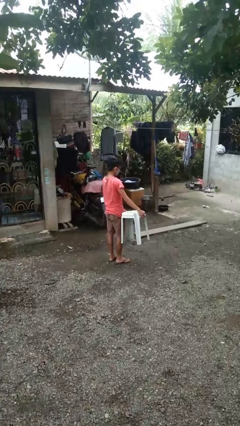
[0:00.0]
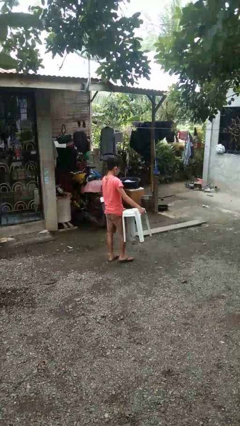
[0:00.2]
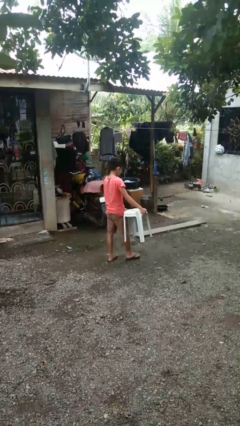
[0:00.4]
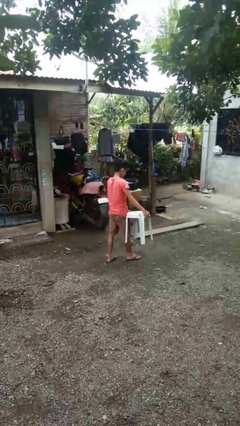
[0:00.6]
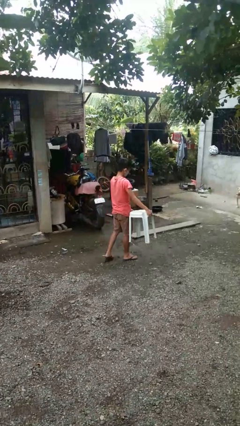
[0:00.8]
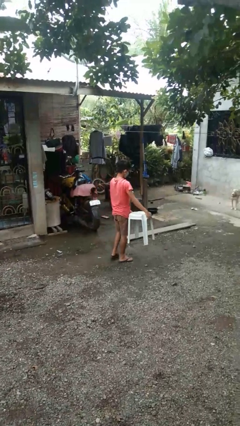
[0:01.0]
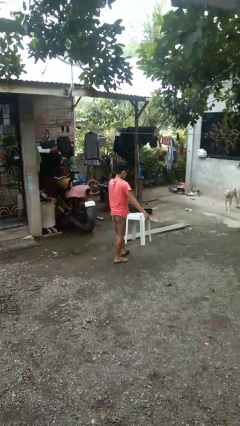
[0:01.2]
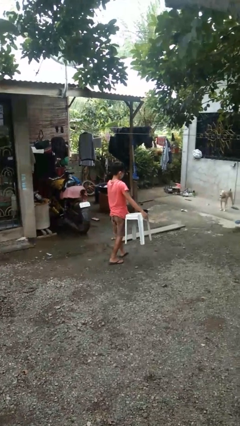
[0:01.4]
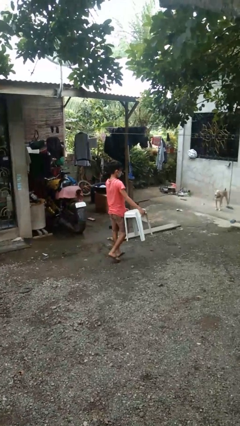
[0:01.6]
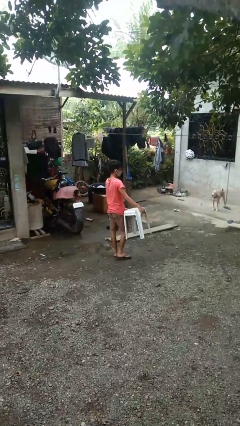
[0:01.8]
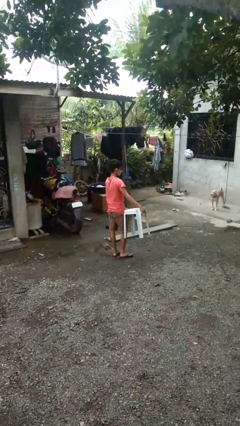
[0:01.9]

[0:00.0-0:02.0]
person carries furniture

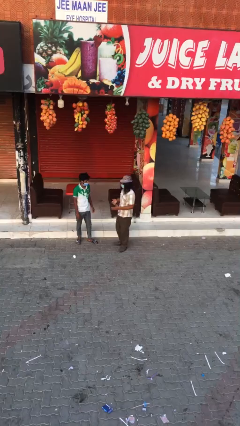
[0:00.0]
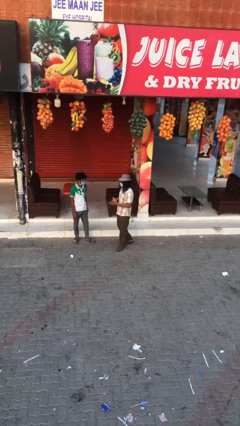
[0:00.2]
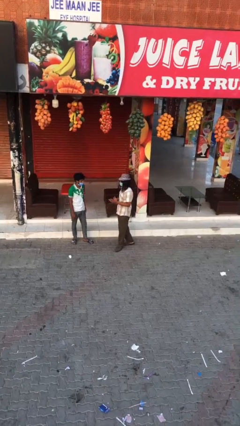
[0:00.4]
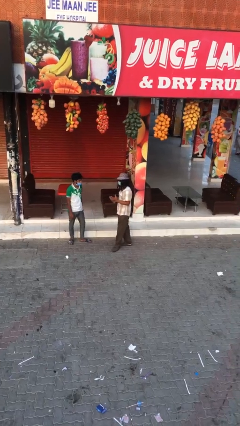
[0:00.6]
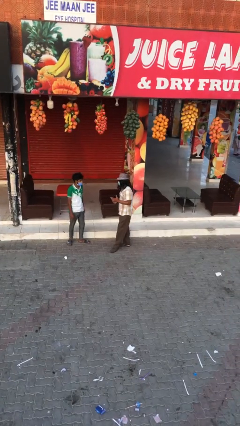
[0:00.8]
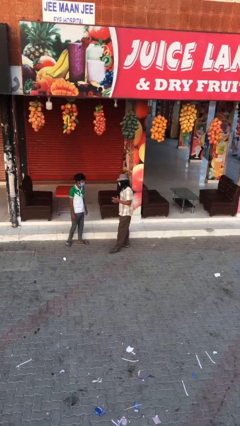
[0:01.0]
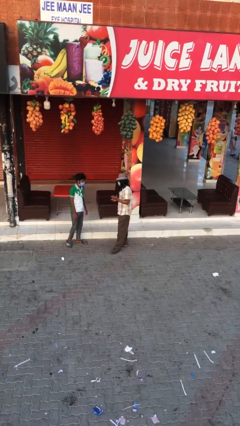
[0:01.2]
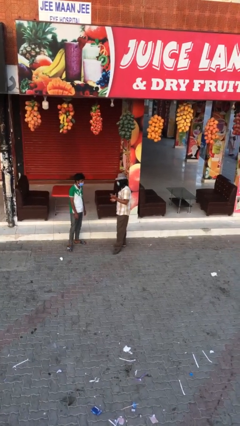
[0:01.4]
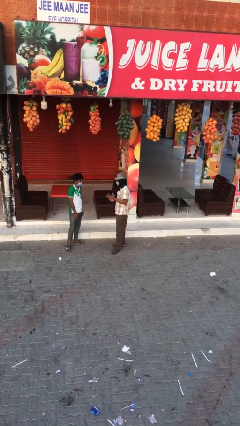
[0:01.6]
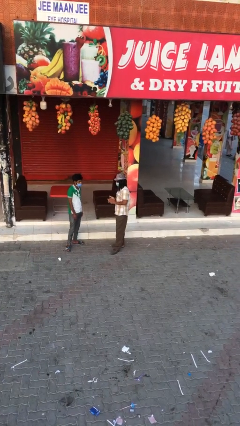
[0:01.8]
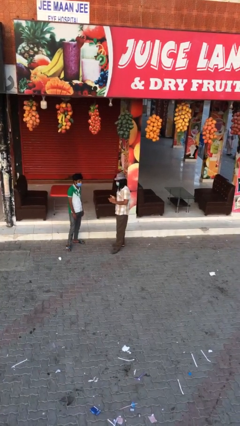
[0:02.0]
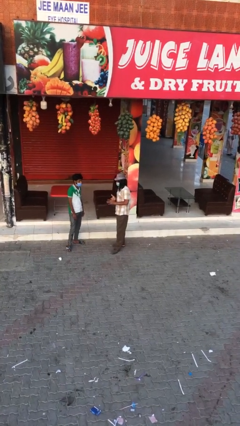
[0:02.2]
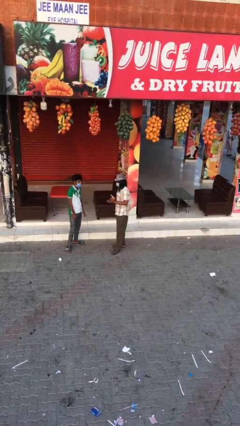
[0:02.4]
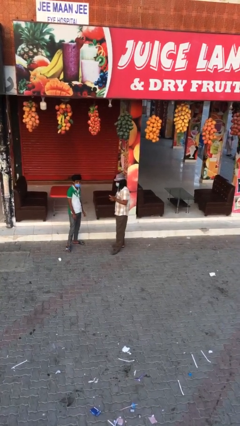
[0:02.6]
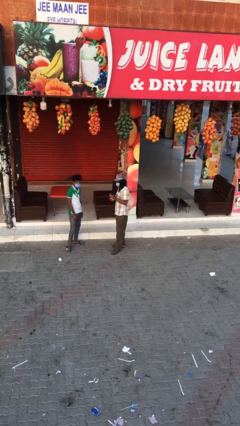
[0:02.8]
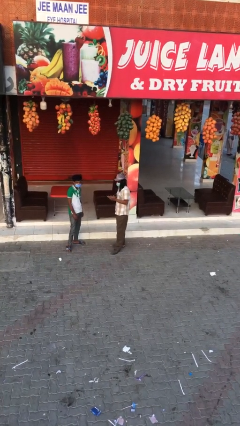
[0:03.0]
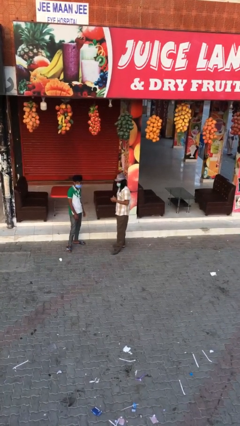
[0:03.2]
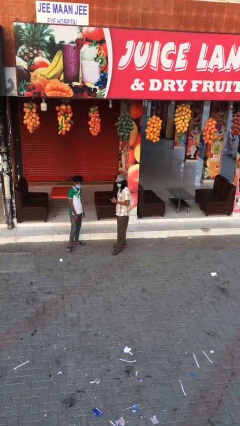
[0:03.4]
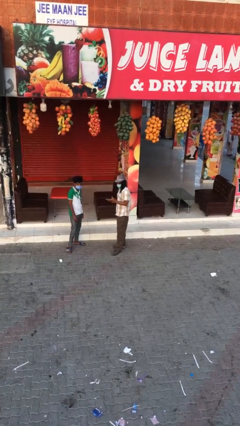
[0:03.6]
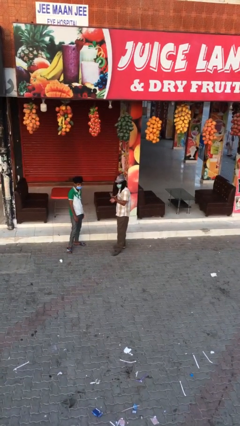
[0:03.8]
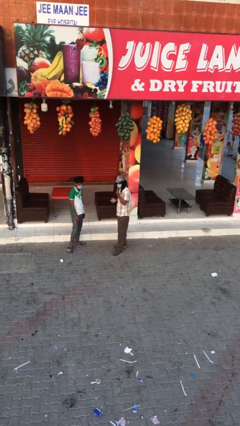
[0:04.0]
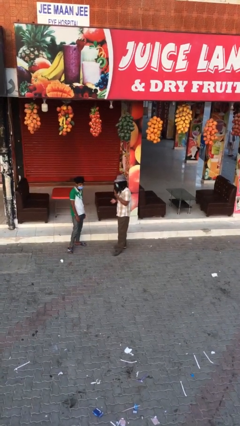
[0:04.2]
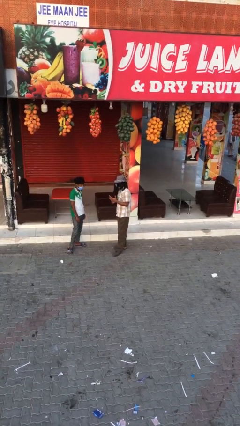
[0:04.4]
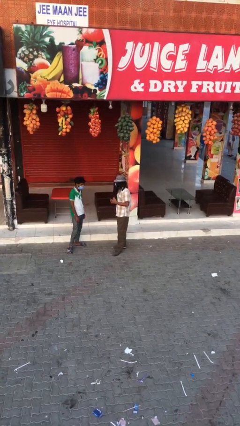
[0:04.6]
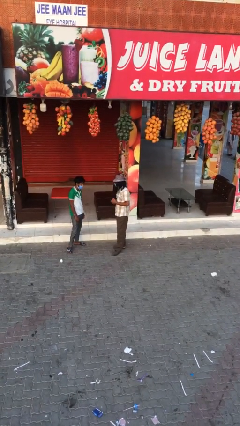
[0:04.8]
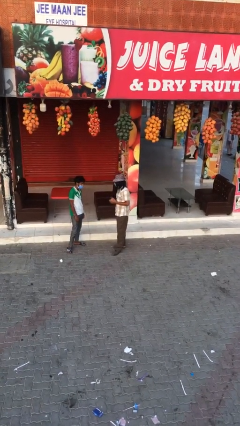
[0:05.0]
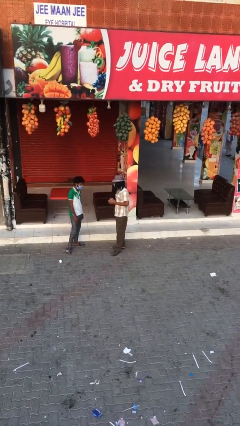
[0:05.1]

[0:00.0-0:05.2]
person talks to person

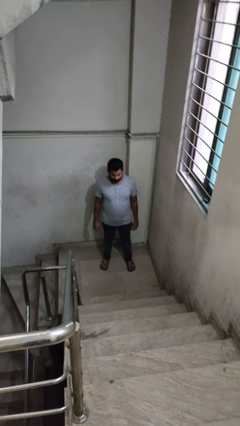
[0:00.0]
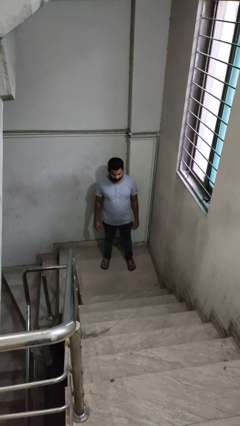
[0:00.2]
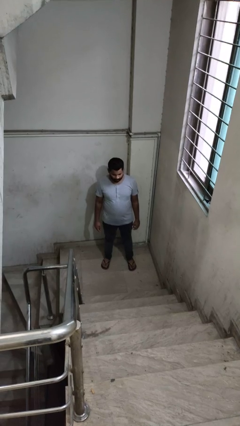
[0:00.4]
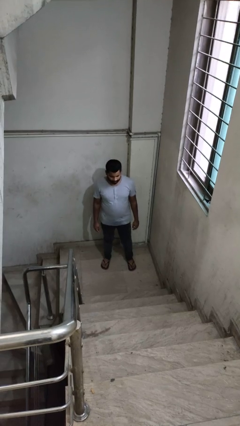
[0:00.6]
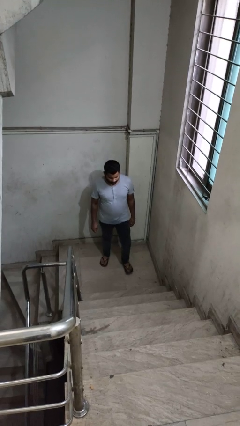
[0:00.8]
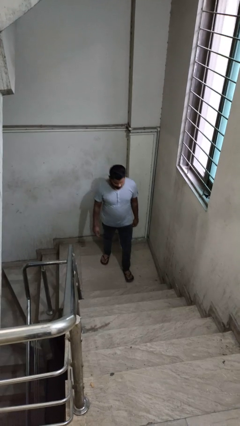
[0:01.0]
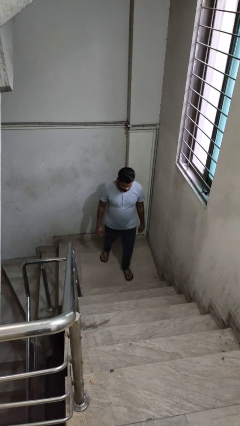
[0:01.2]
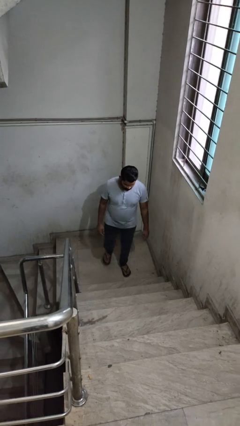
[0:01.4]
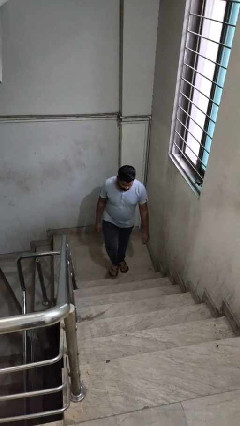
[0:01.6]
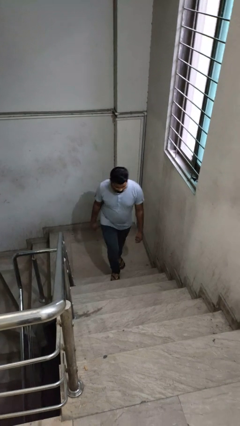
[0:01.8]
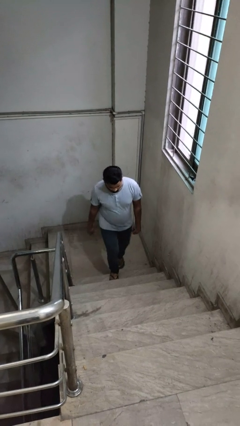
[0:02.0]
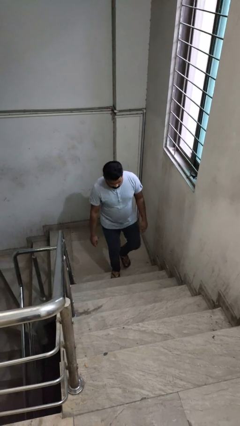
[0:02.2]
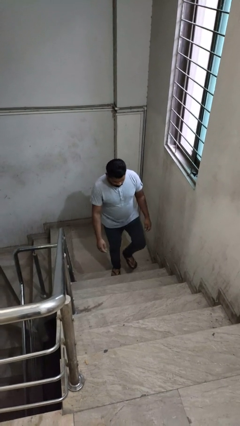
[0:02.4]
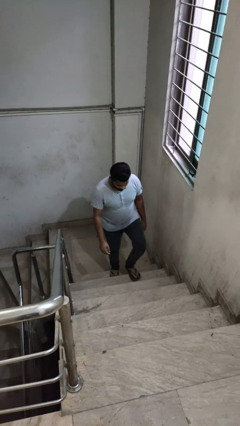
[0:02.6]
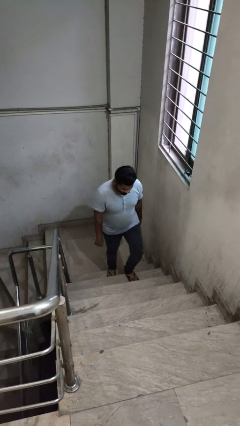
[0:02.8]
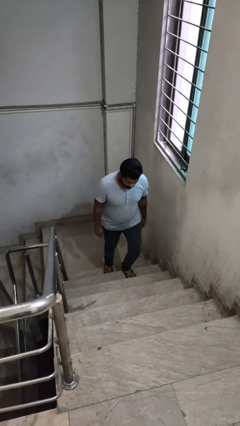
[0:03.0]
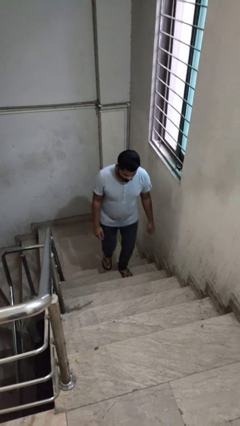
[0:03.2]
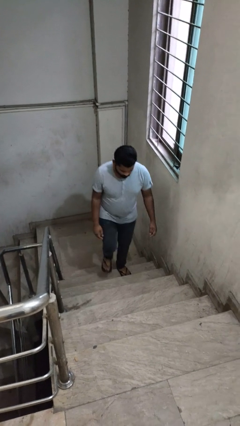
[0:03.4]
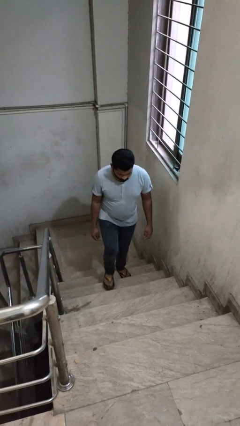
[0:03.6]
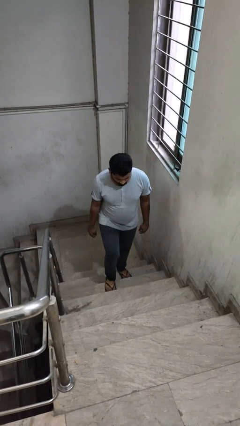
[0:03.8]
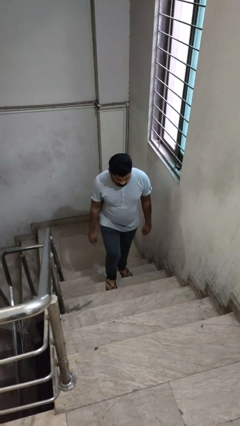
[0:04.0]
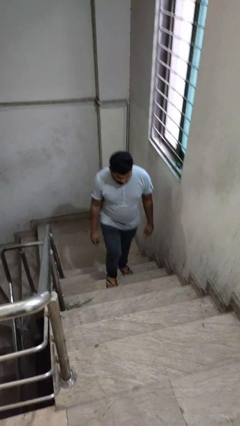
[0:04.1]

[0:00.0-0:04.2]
person climbs up stairs

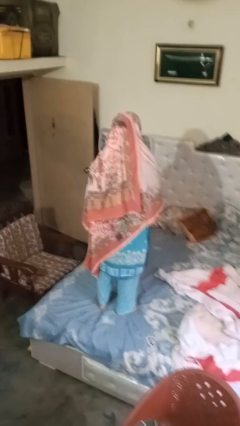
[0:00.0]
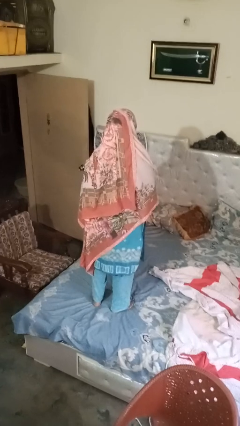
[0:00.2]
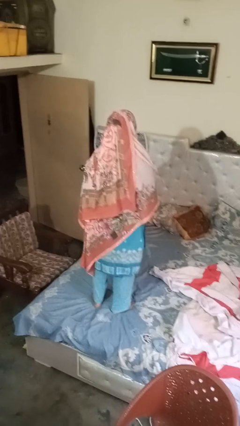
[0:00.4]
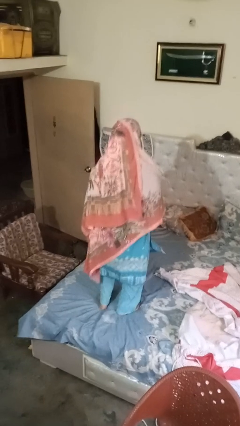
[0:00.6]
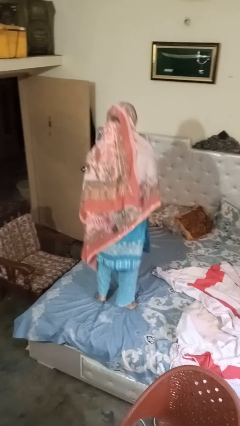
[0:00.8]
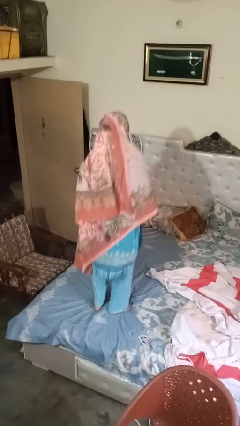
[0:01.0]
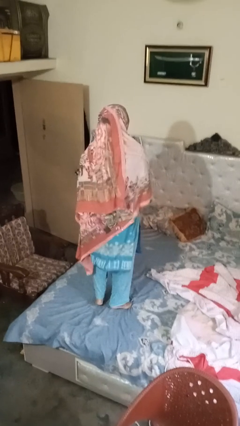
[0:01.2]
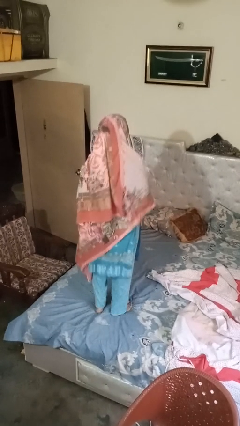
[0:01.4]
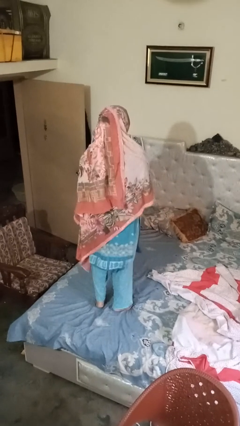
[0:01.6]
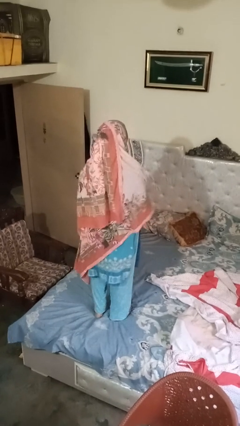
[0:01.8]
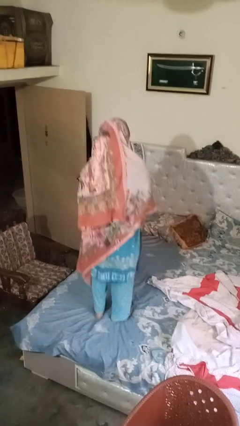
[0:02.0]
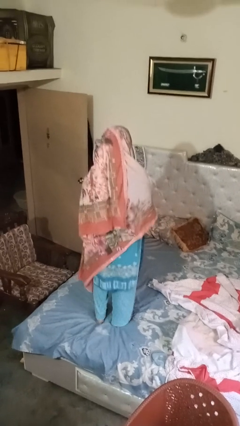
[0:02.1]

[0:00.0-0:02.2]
person jumps on bed

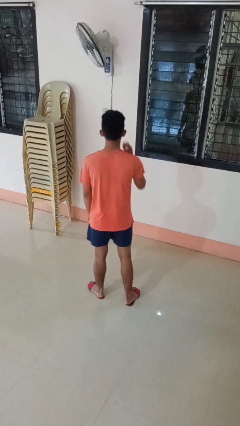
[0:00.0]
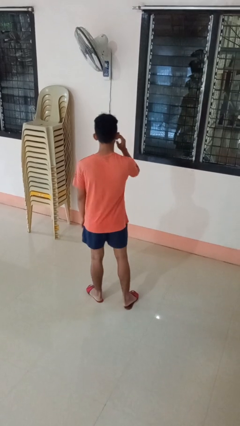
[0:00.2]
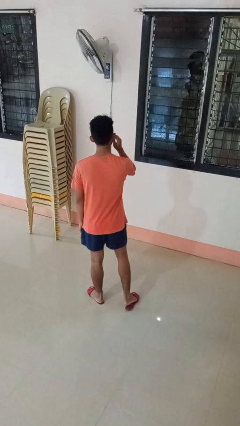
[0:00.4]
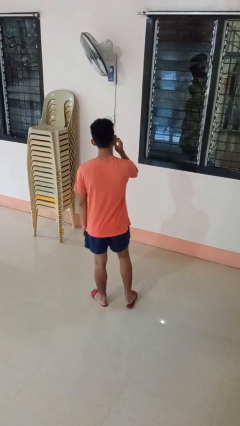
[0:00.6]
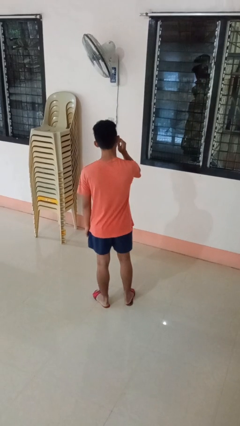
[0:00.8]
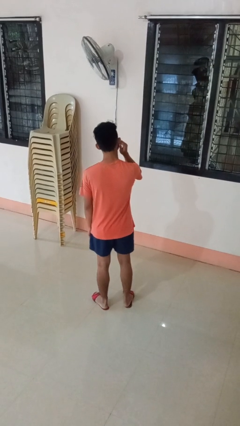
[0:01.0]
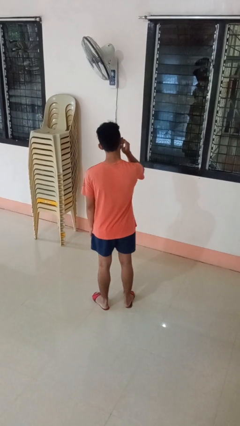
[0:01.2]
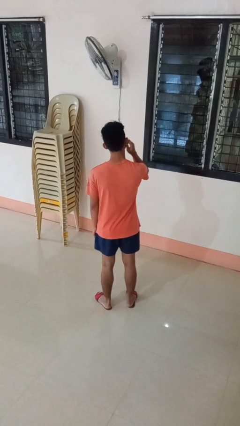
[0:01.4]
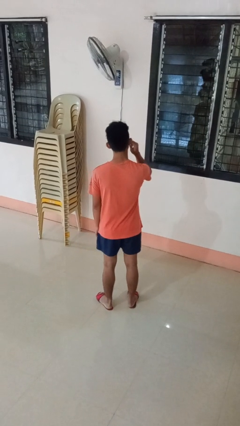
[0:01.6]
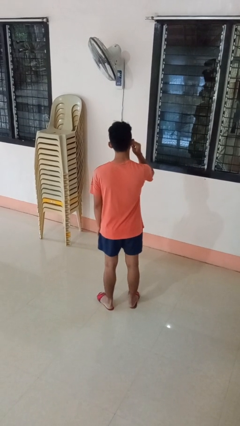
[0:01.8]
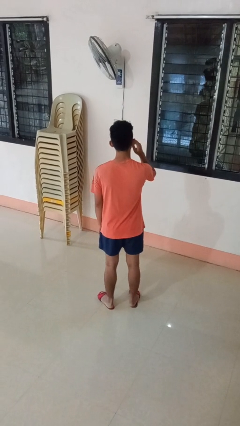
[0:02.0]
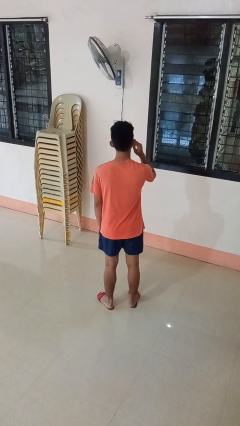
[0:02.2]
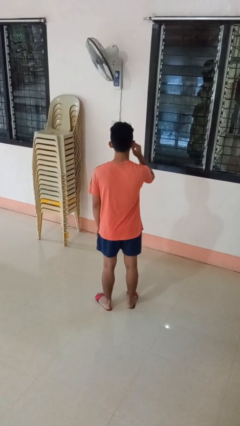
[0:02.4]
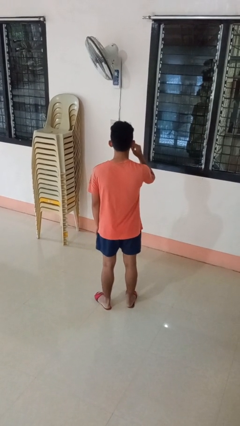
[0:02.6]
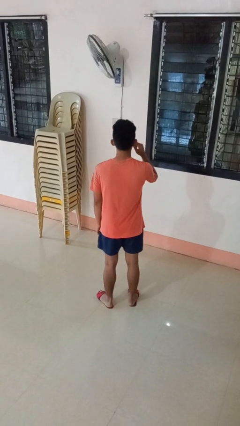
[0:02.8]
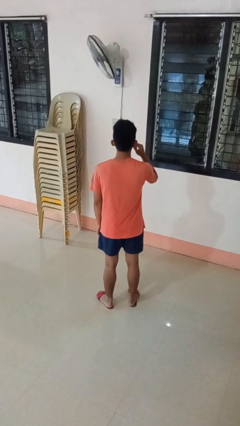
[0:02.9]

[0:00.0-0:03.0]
person touches earlobe

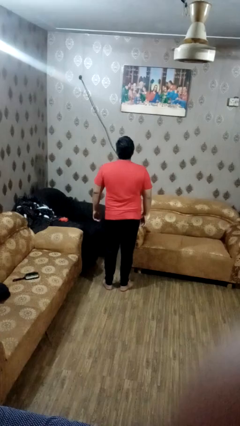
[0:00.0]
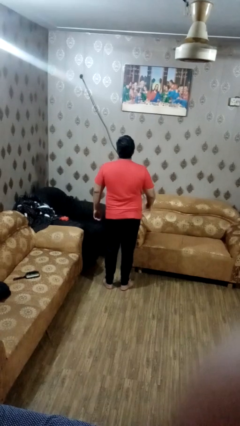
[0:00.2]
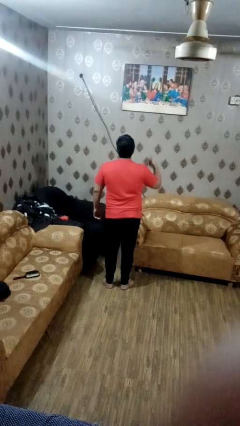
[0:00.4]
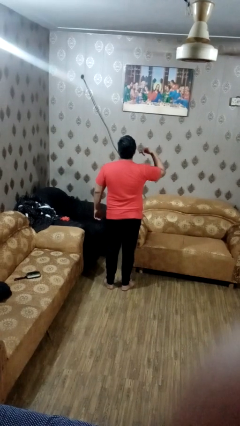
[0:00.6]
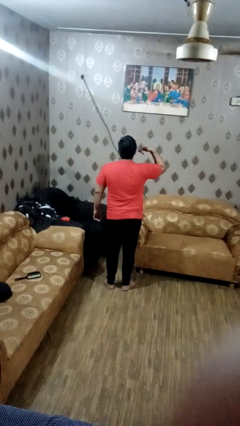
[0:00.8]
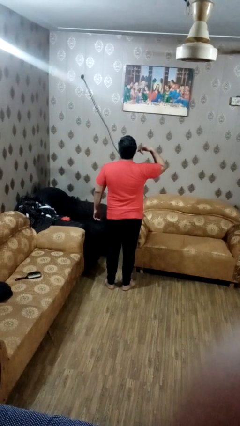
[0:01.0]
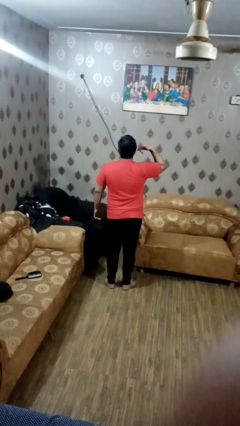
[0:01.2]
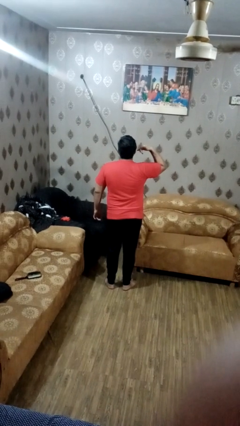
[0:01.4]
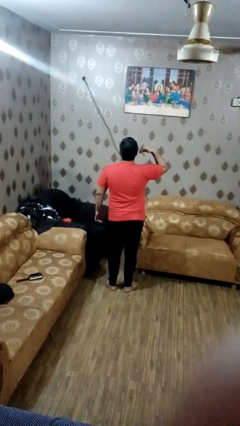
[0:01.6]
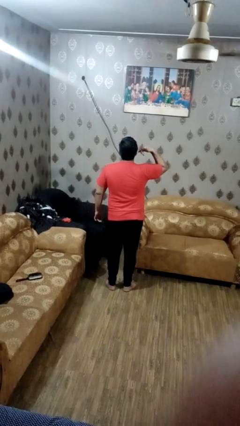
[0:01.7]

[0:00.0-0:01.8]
person gestures call me
